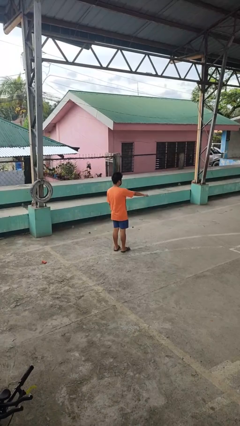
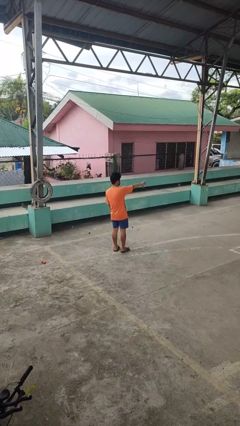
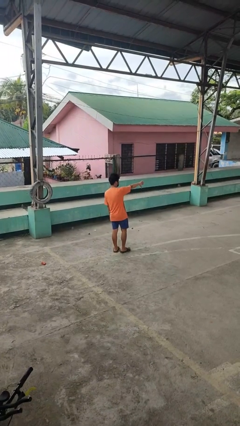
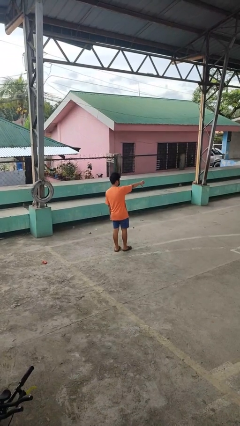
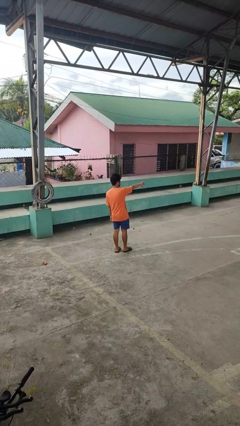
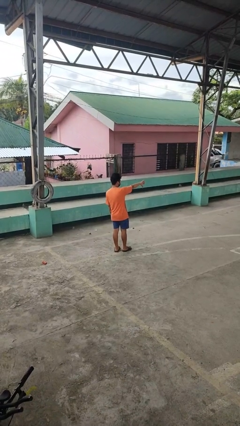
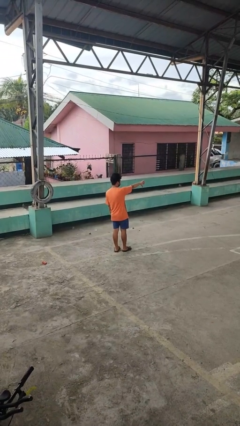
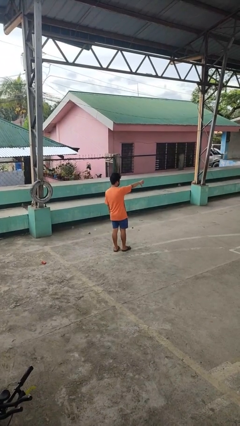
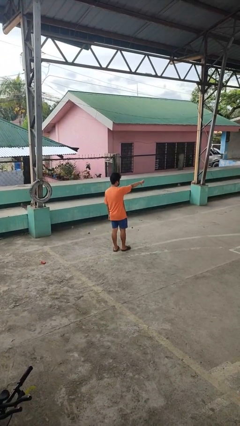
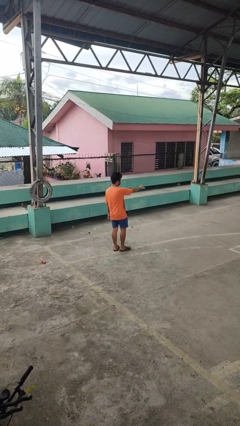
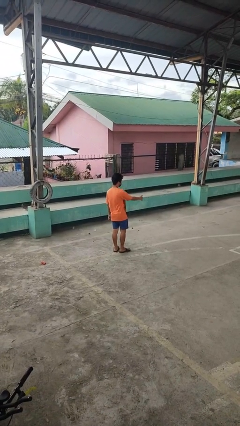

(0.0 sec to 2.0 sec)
person gestures thumbs down

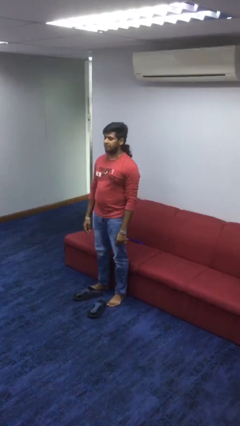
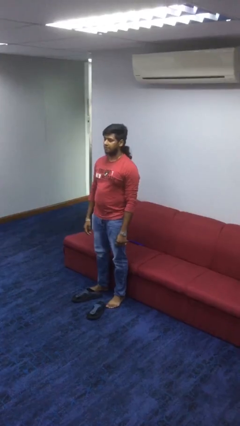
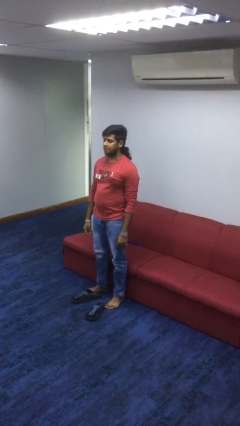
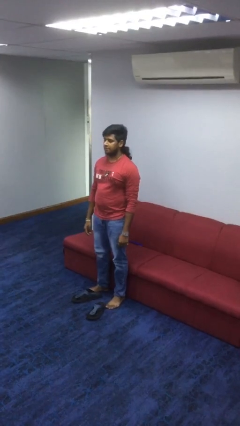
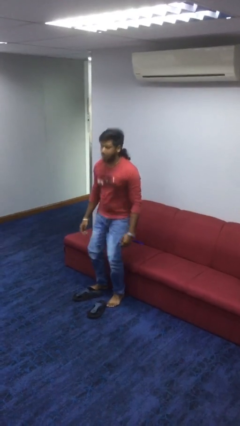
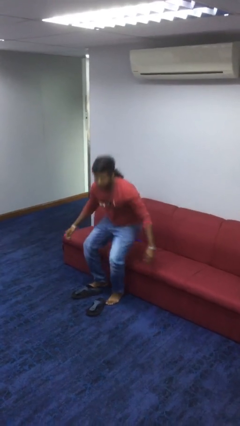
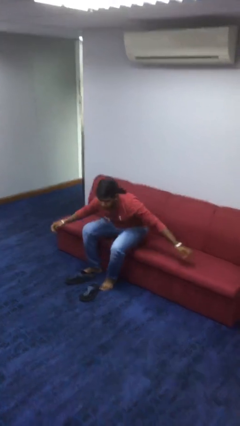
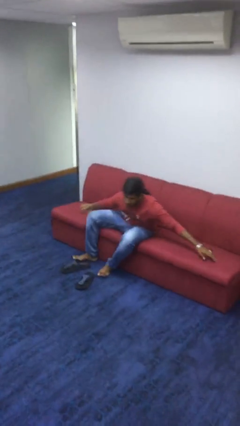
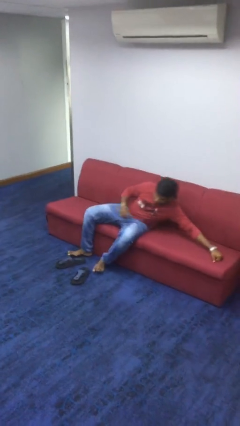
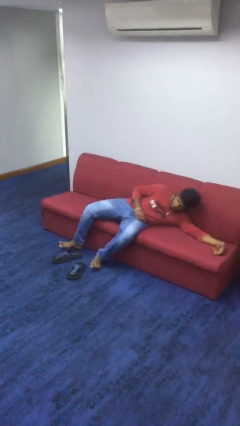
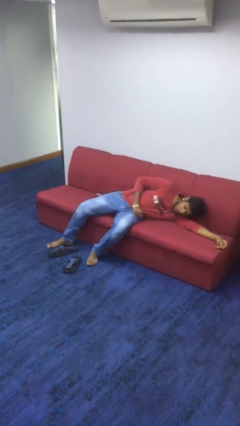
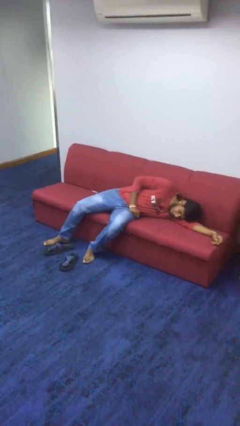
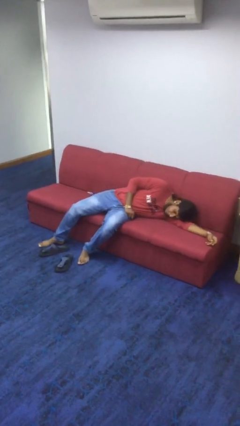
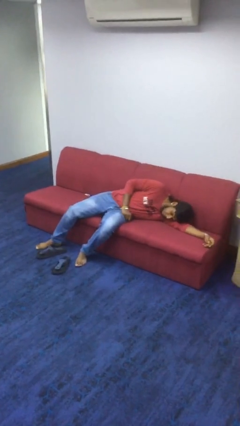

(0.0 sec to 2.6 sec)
person lies down on couch

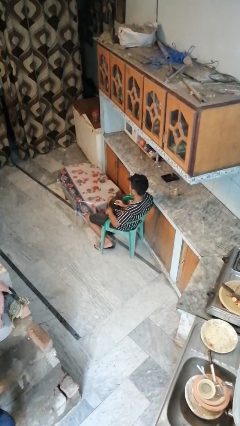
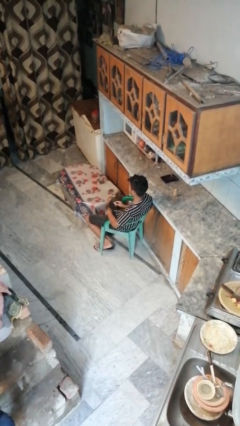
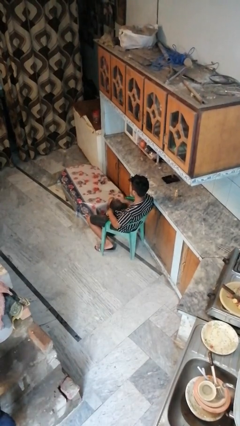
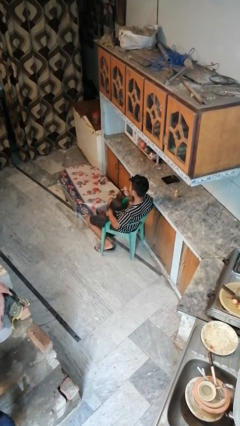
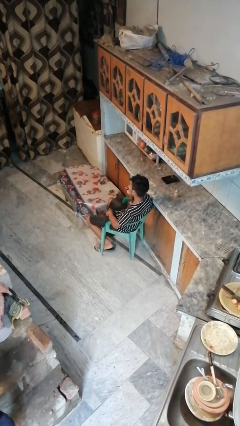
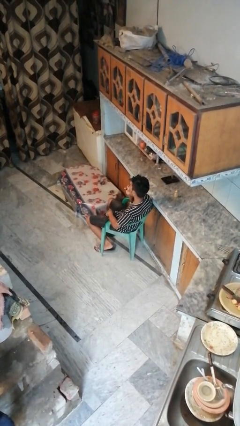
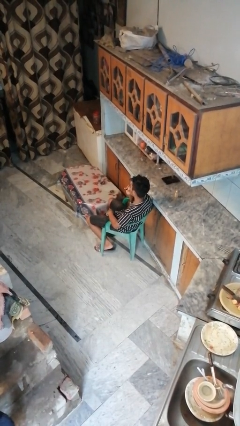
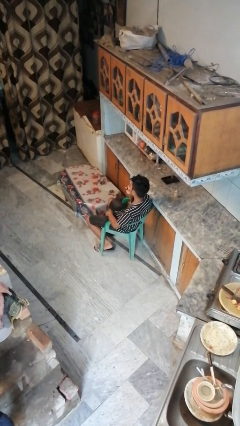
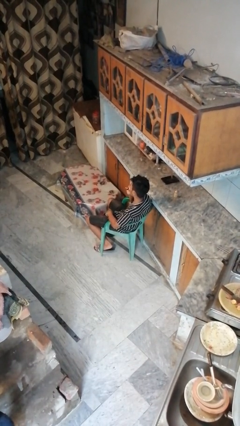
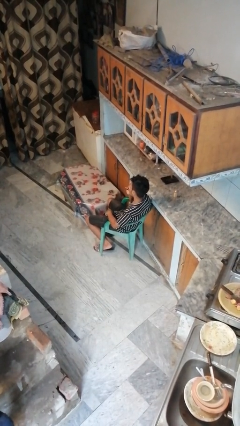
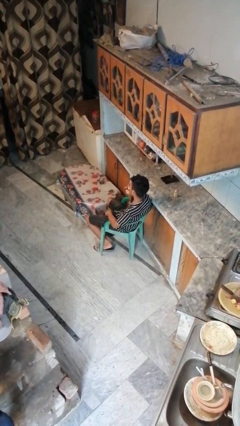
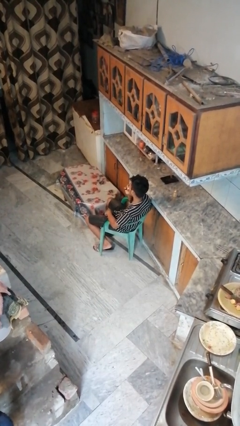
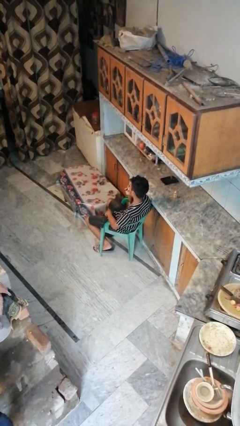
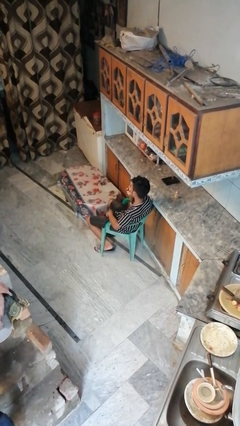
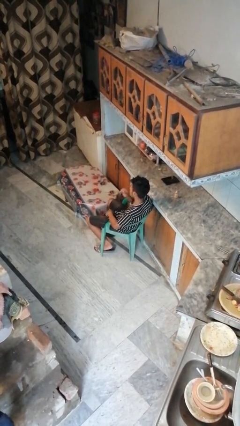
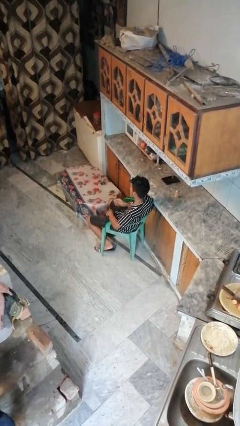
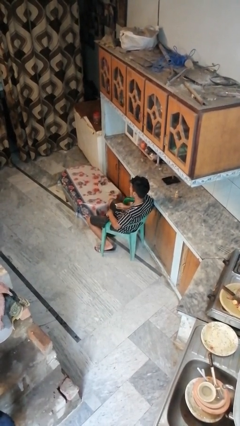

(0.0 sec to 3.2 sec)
person applies lip makeup

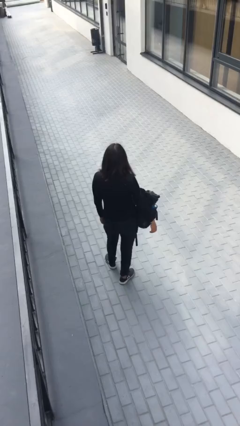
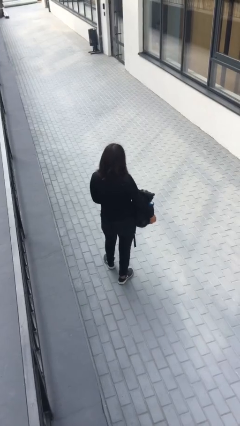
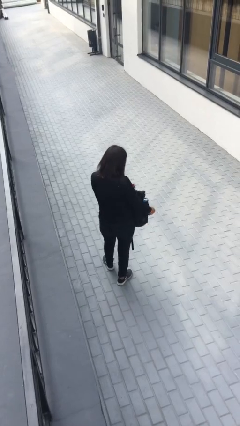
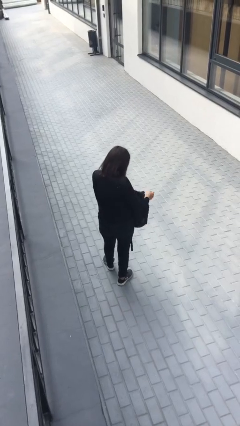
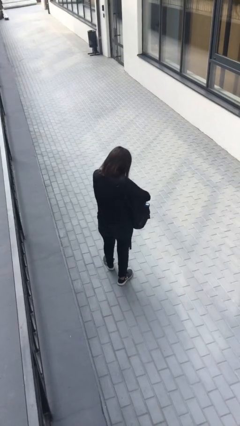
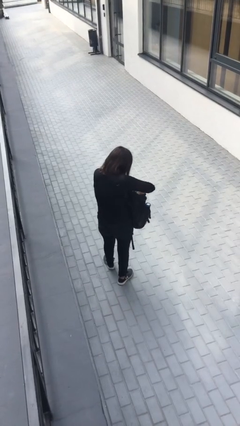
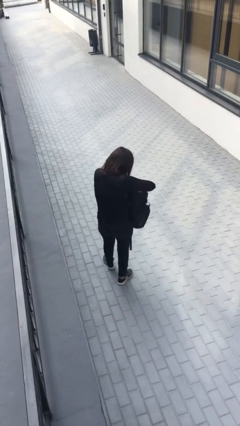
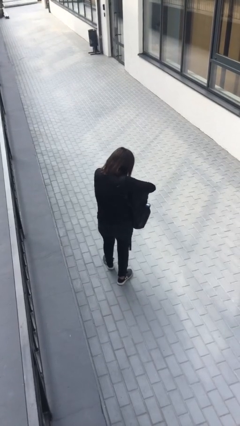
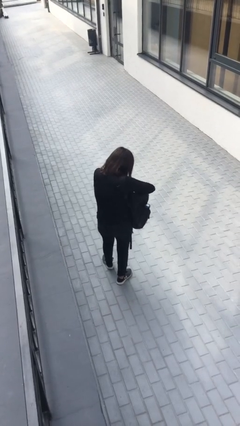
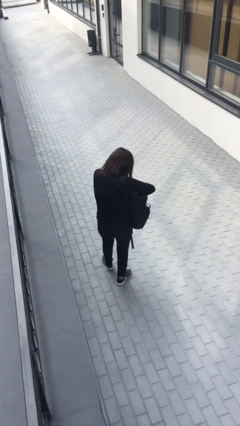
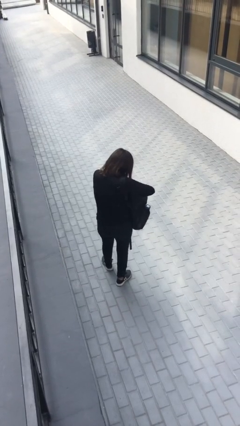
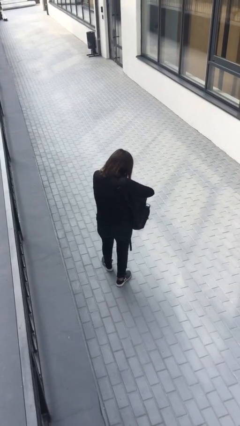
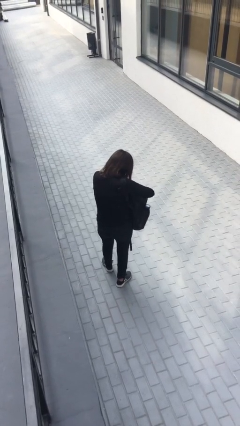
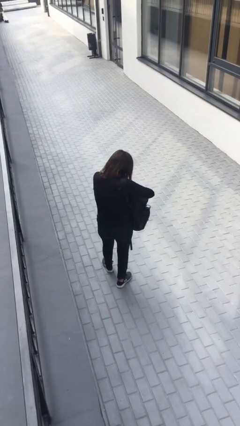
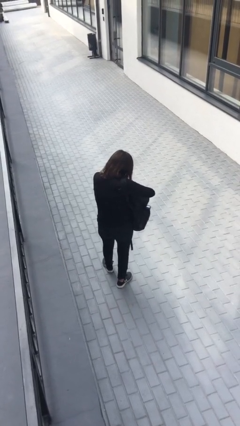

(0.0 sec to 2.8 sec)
person searches in backpack

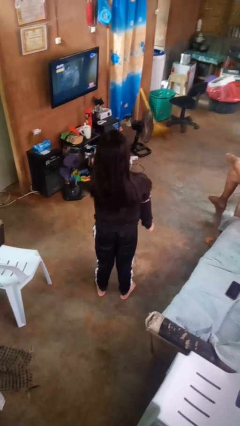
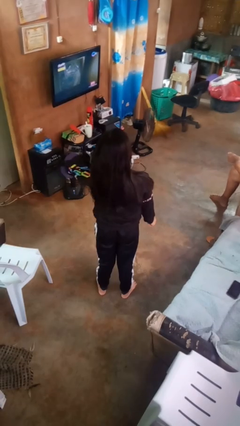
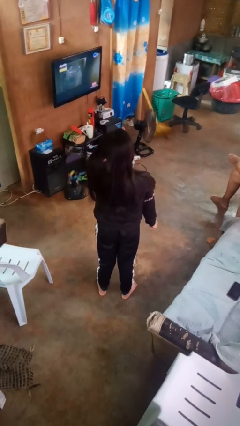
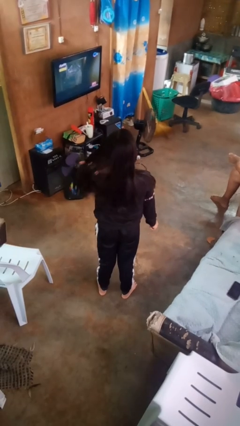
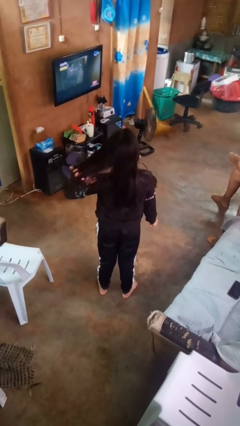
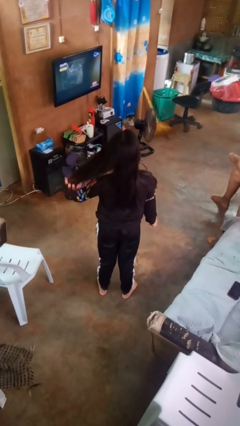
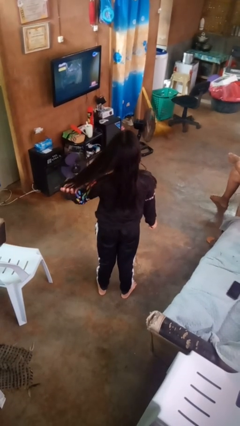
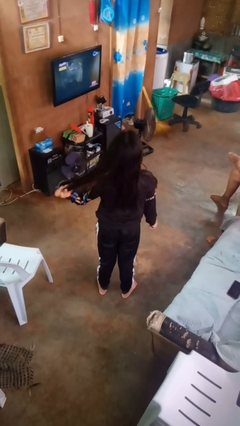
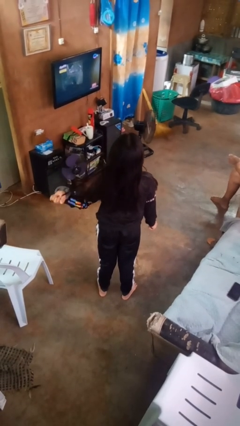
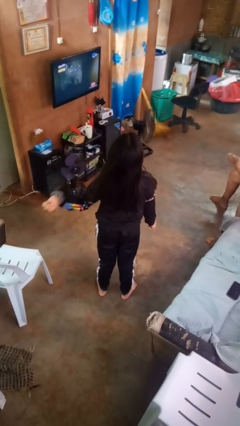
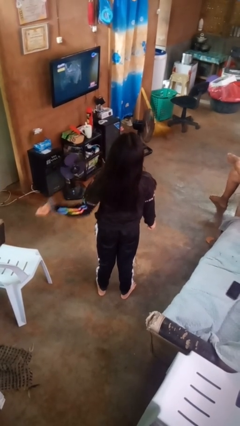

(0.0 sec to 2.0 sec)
person strokes hair

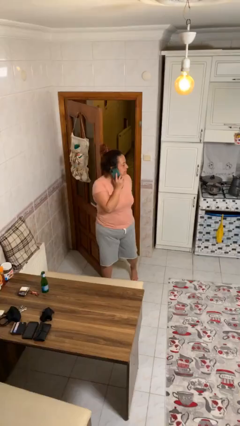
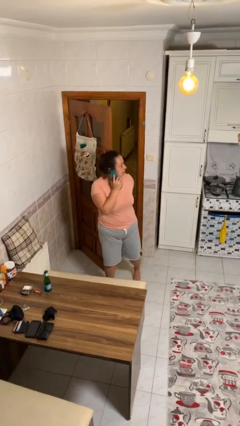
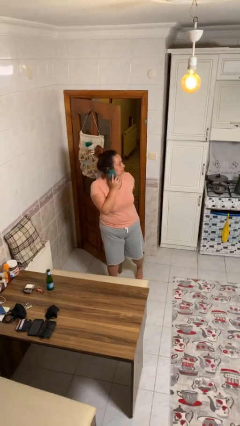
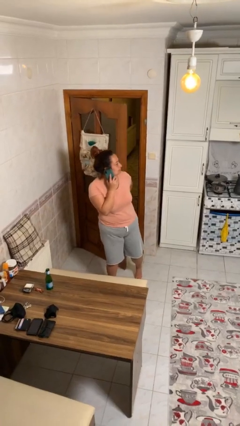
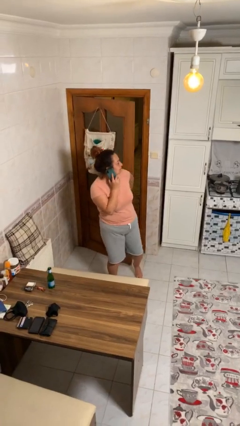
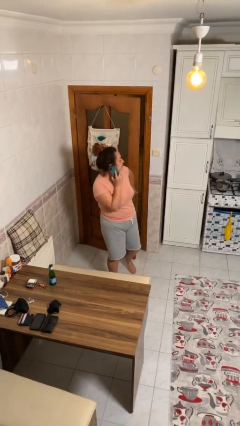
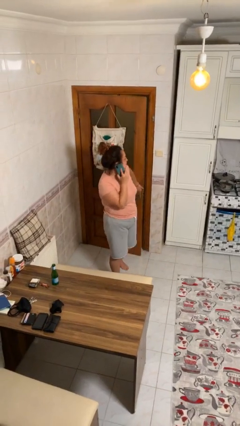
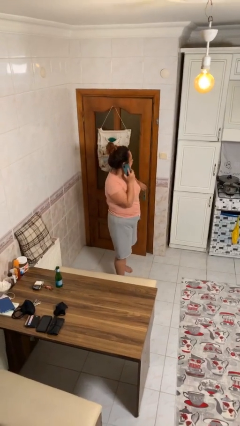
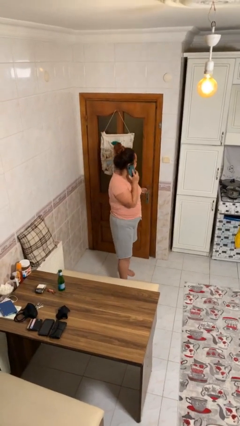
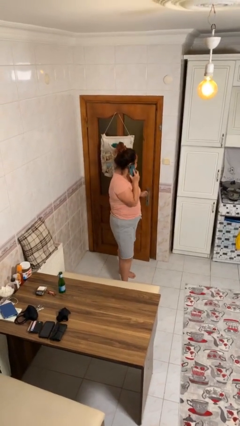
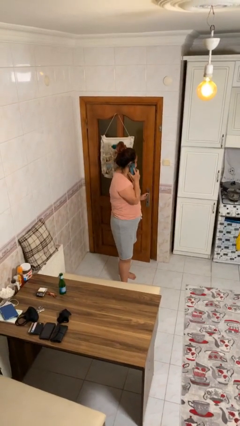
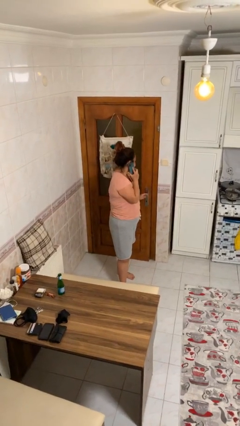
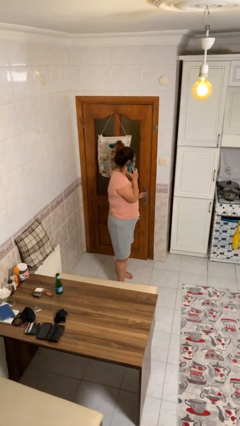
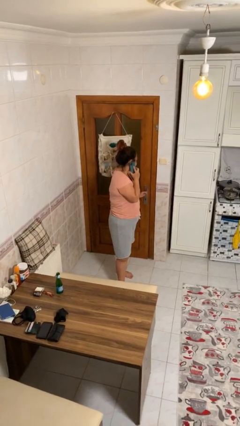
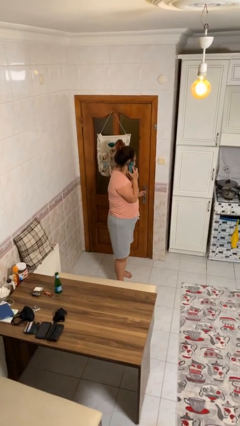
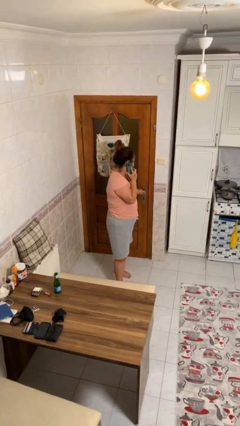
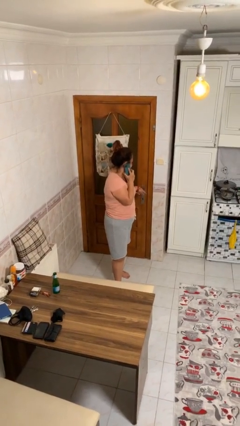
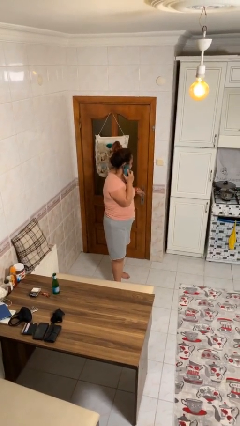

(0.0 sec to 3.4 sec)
person closes facility door

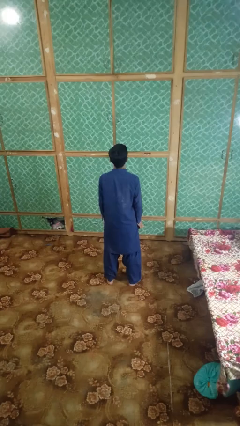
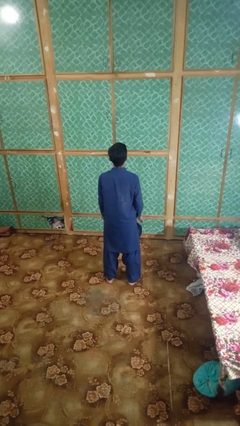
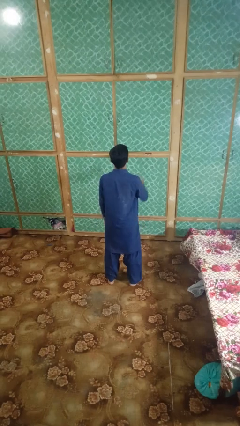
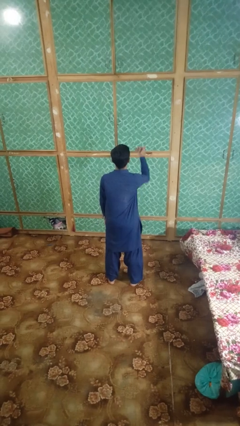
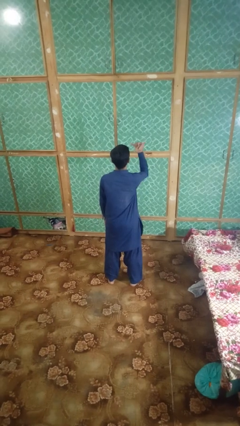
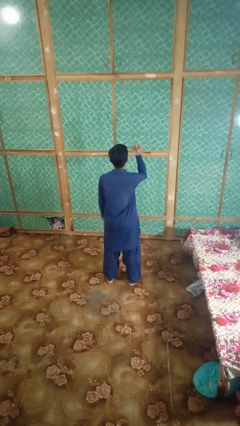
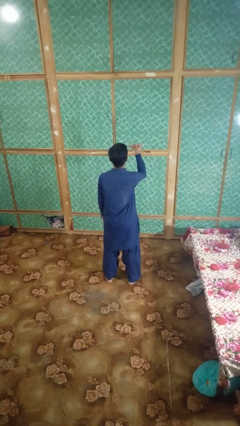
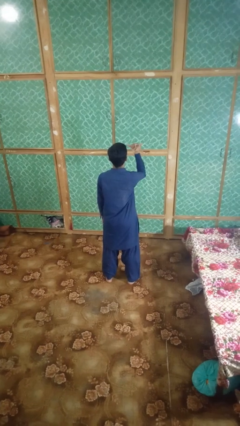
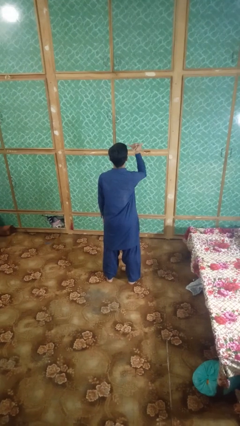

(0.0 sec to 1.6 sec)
person gestures hang loose
